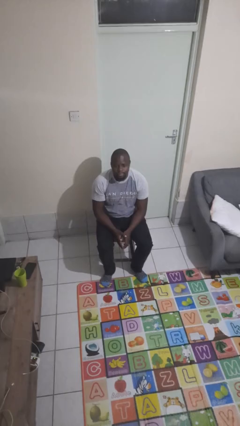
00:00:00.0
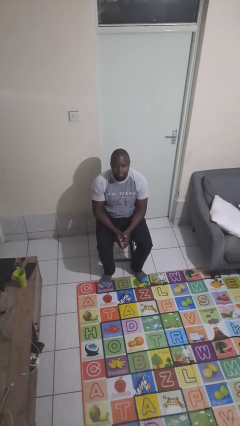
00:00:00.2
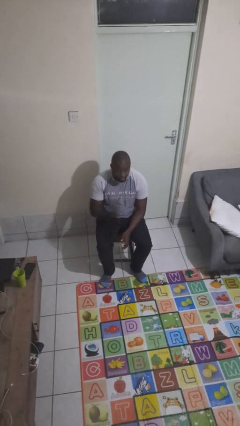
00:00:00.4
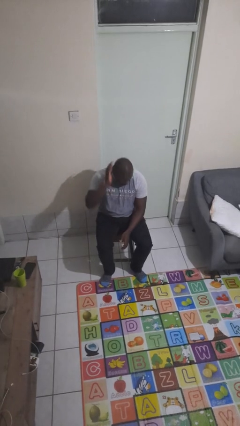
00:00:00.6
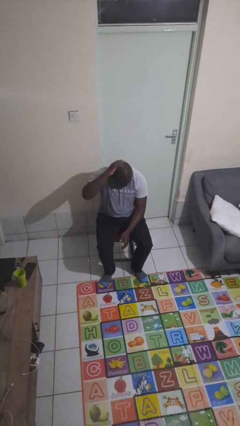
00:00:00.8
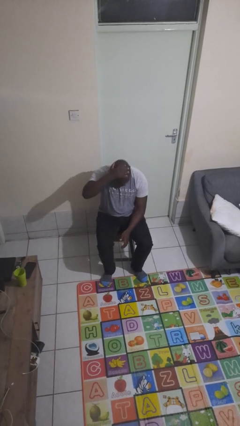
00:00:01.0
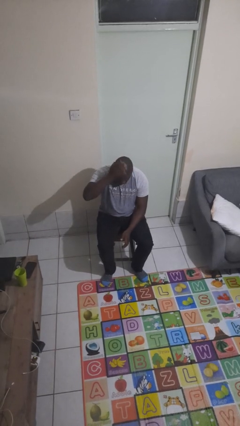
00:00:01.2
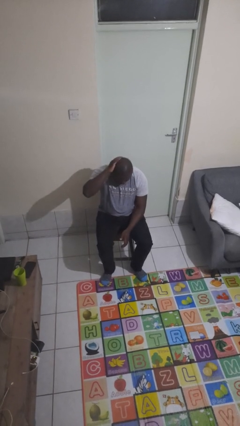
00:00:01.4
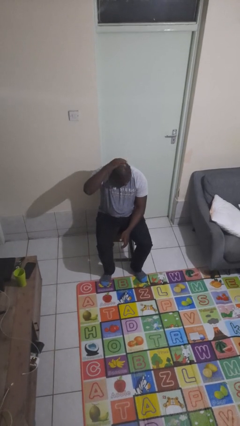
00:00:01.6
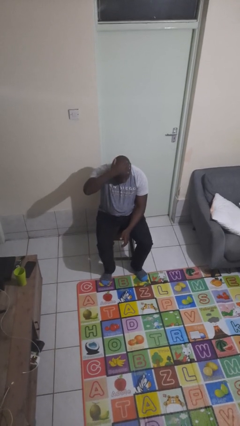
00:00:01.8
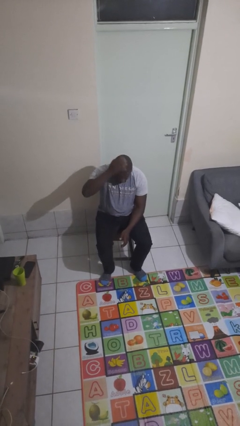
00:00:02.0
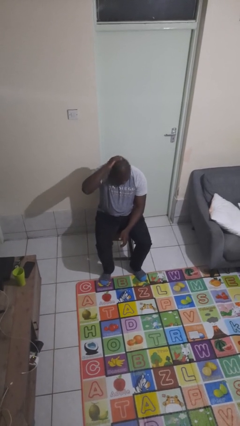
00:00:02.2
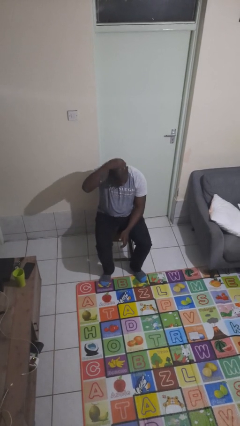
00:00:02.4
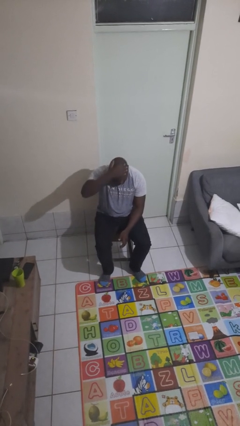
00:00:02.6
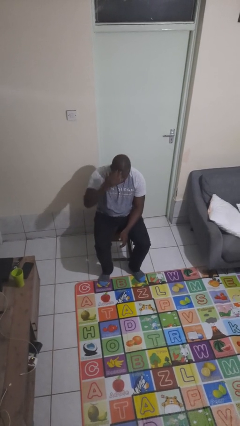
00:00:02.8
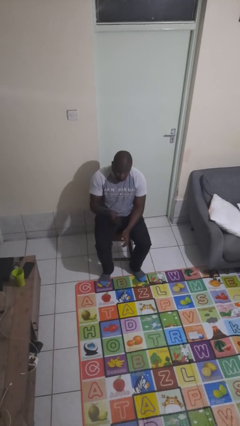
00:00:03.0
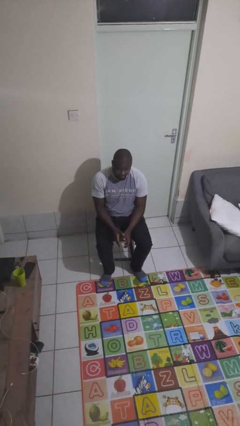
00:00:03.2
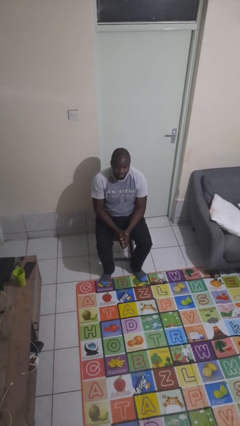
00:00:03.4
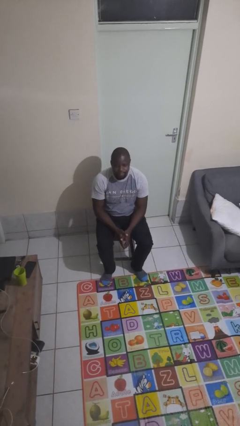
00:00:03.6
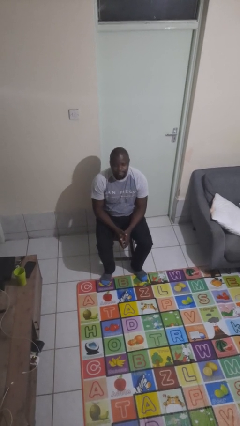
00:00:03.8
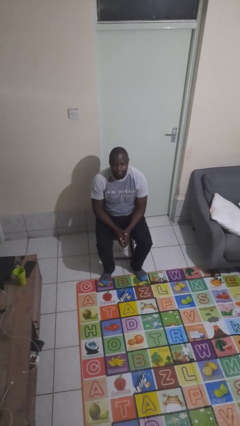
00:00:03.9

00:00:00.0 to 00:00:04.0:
person scratches face

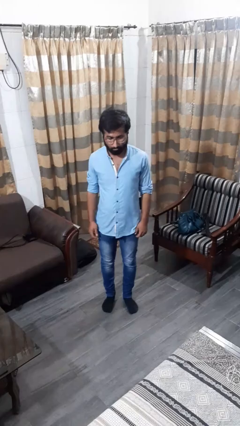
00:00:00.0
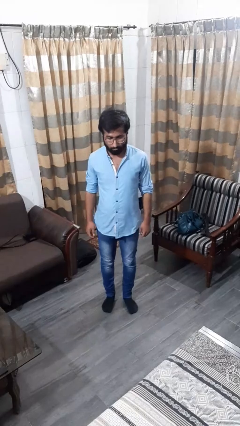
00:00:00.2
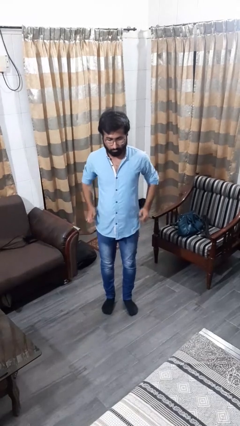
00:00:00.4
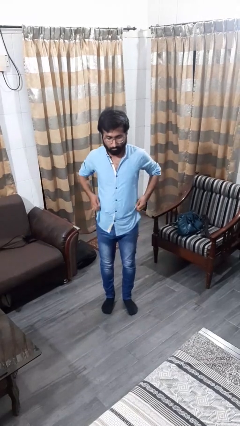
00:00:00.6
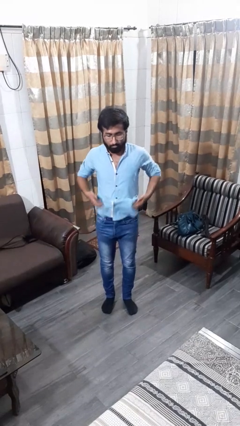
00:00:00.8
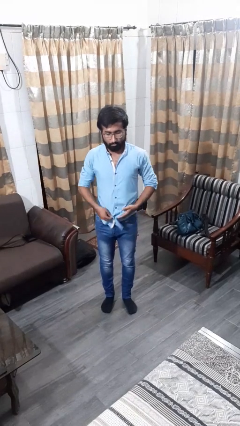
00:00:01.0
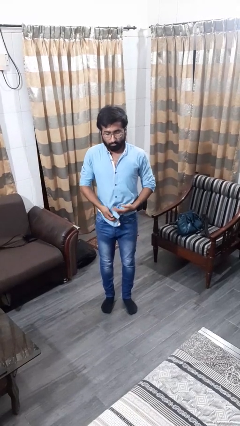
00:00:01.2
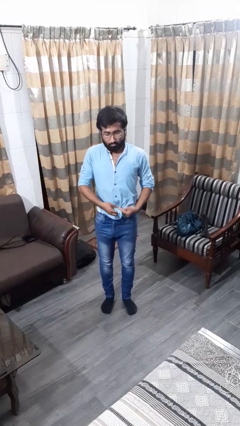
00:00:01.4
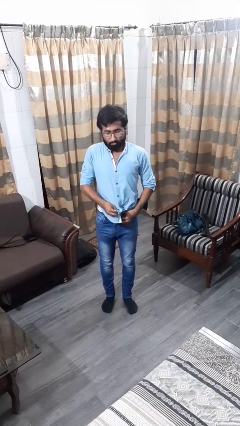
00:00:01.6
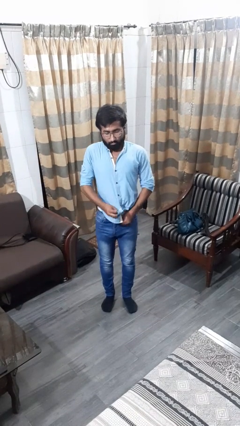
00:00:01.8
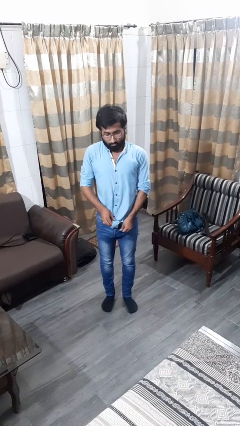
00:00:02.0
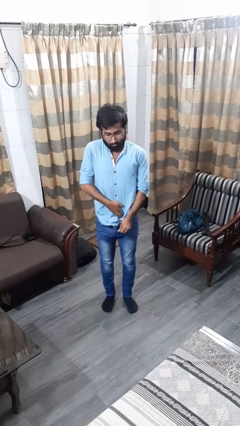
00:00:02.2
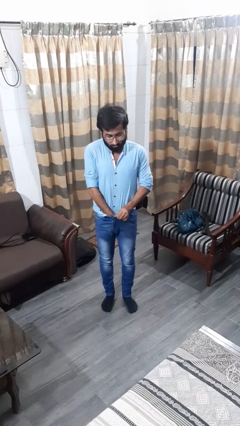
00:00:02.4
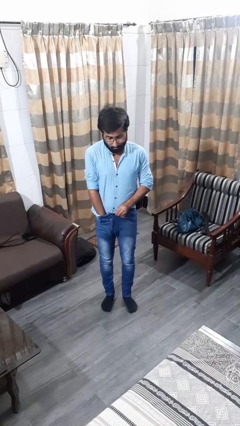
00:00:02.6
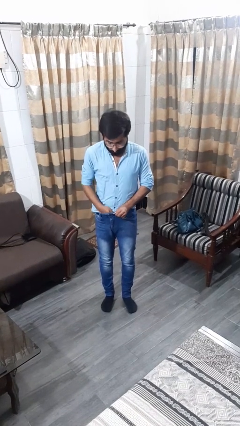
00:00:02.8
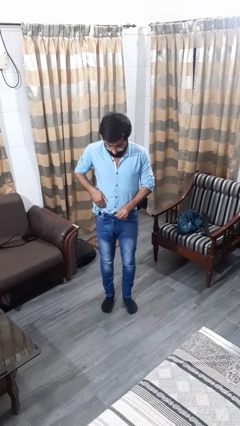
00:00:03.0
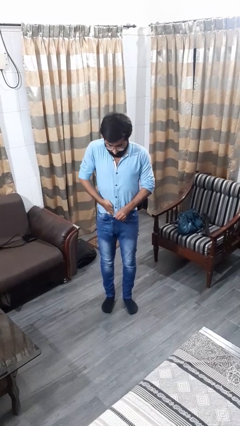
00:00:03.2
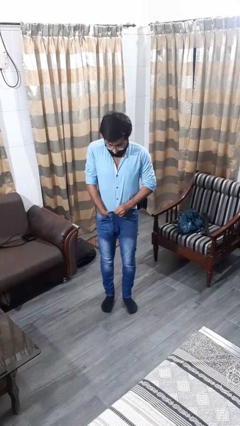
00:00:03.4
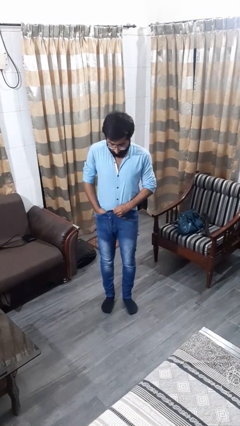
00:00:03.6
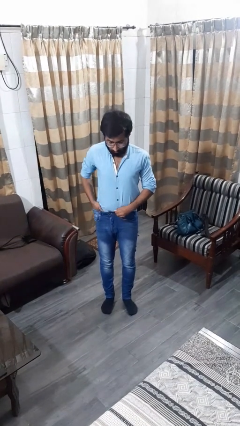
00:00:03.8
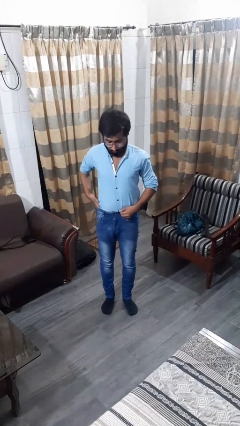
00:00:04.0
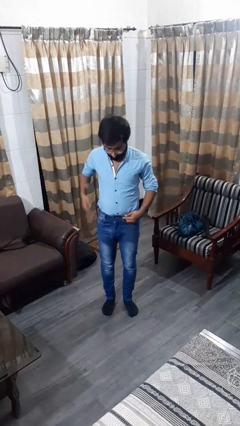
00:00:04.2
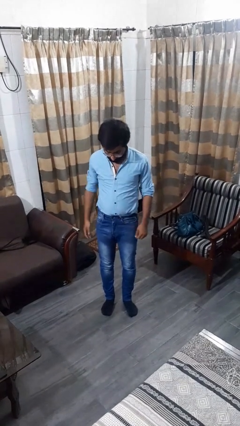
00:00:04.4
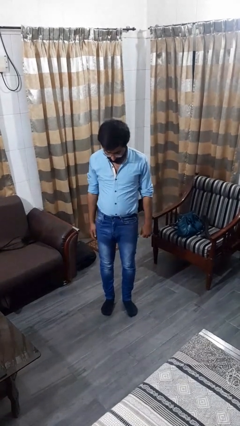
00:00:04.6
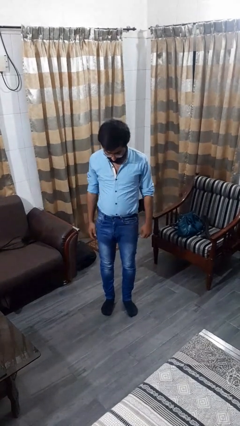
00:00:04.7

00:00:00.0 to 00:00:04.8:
person tucks in shirt

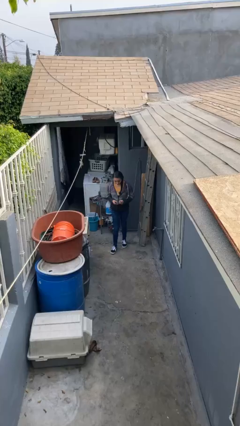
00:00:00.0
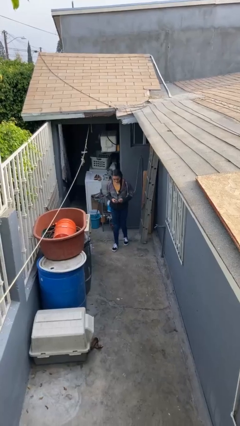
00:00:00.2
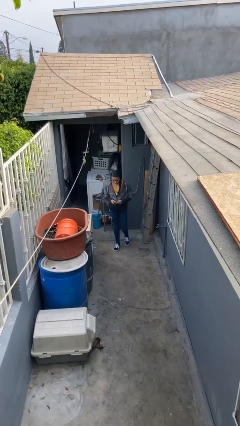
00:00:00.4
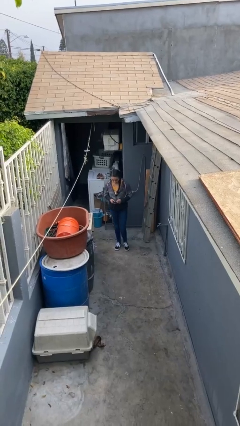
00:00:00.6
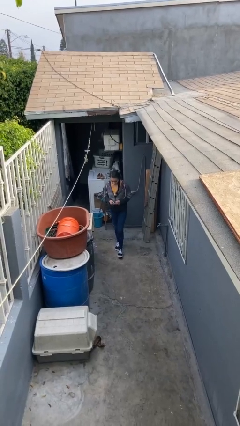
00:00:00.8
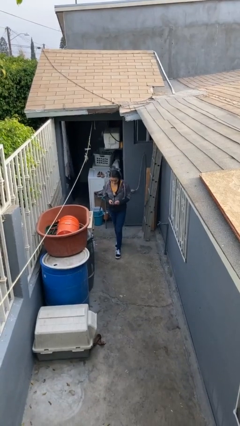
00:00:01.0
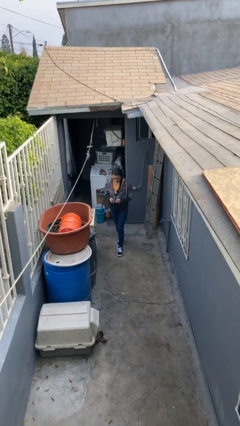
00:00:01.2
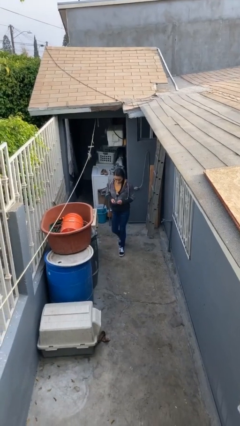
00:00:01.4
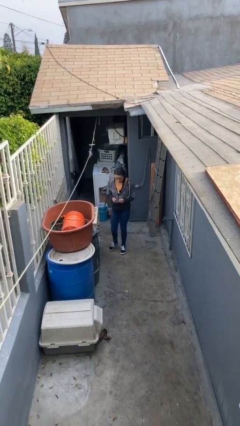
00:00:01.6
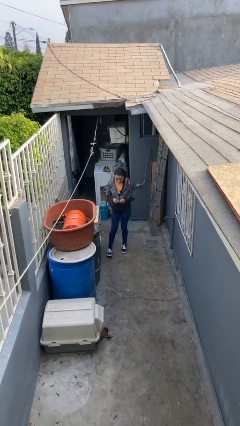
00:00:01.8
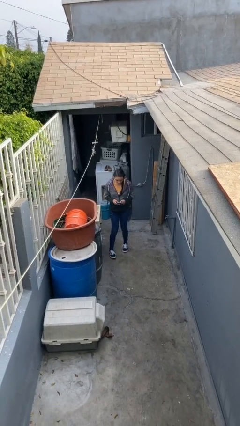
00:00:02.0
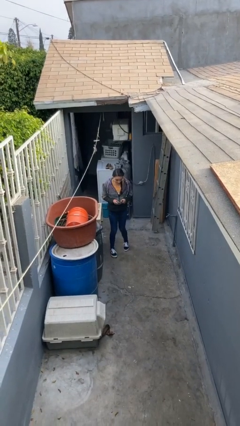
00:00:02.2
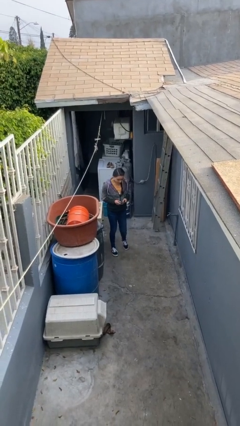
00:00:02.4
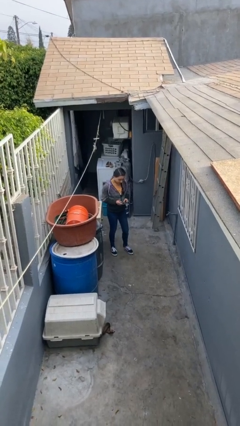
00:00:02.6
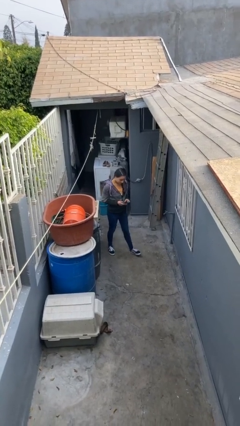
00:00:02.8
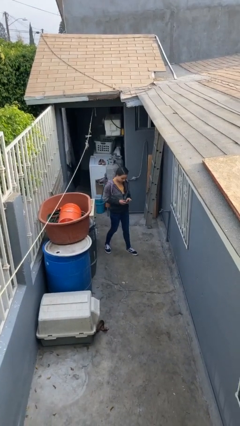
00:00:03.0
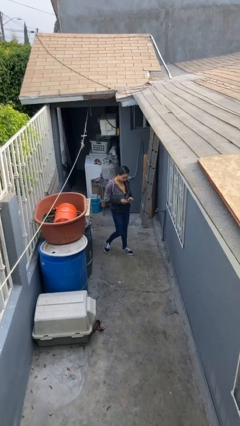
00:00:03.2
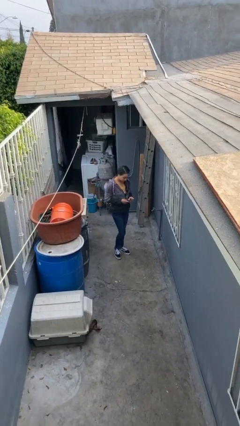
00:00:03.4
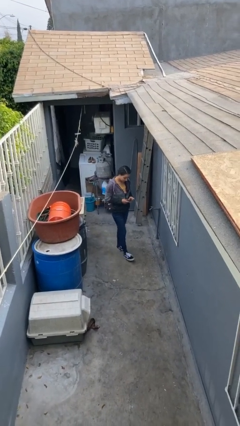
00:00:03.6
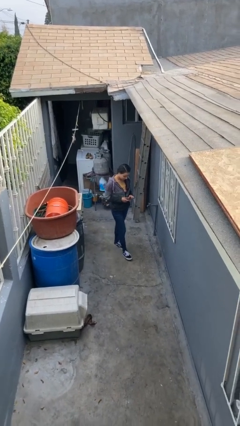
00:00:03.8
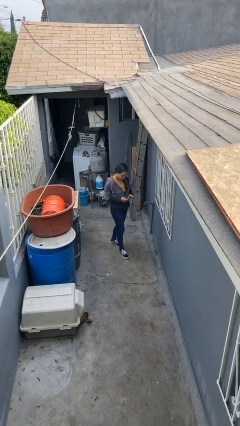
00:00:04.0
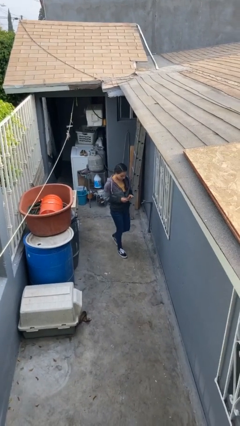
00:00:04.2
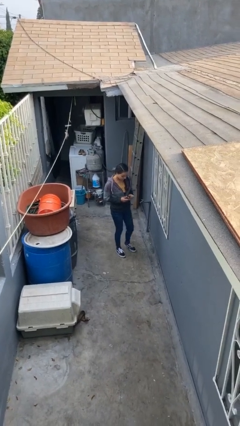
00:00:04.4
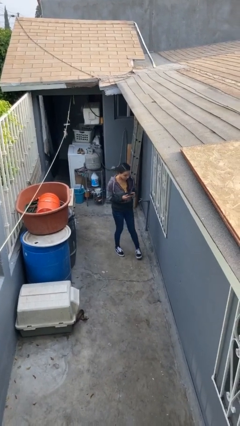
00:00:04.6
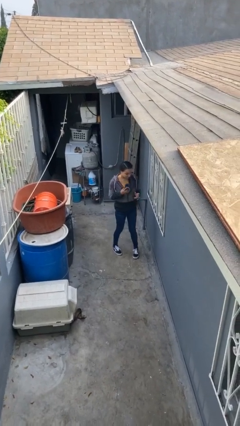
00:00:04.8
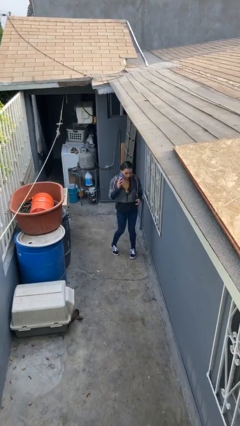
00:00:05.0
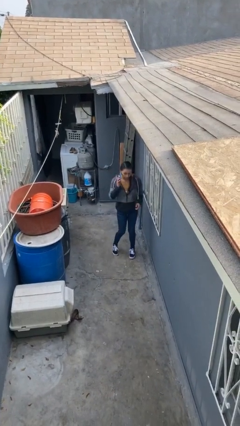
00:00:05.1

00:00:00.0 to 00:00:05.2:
person texts on phone

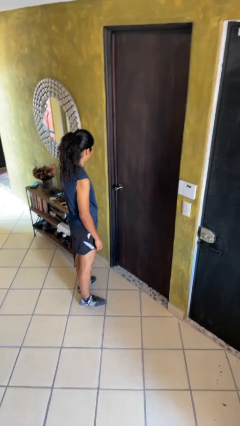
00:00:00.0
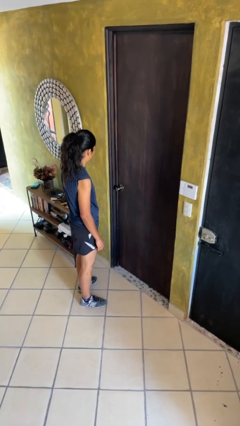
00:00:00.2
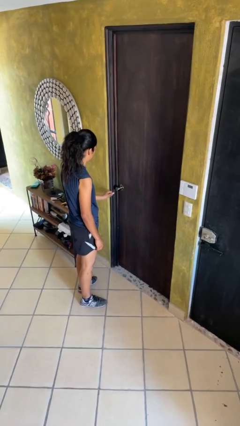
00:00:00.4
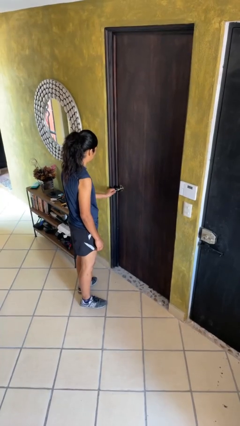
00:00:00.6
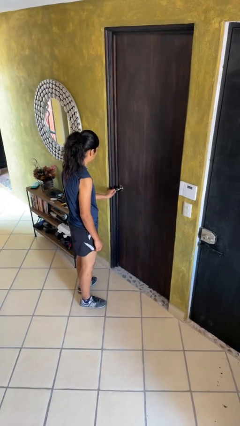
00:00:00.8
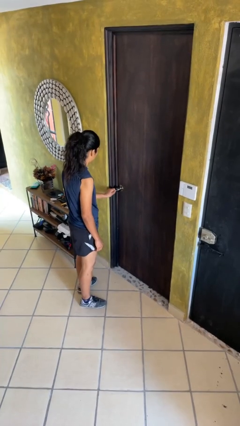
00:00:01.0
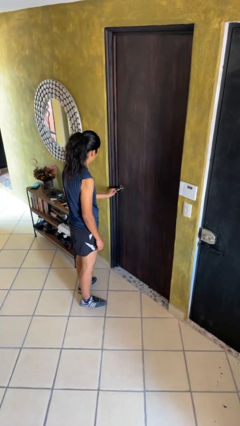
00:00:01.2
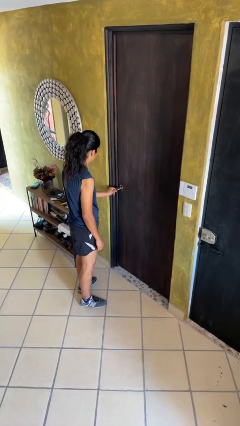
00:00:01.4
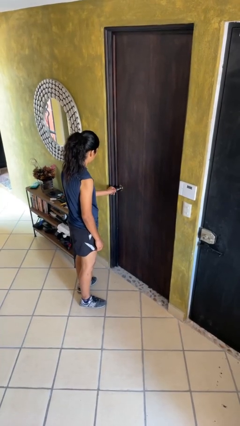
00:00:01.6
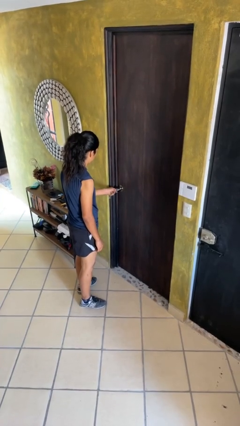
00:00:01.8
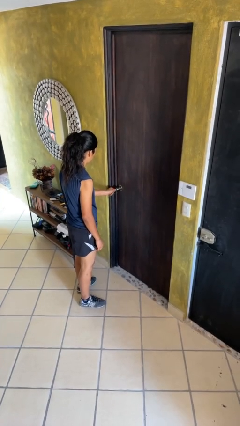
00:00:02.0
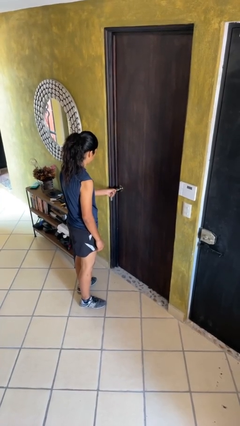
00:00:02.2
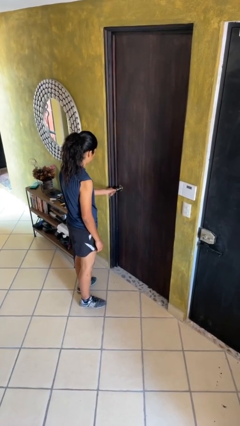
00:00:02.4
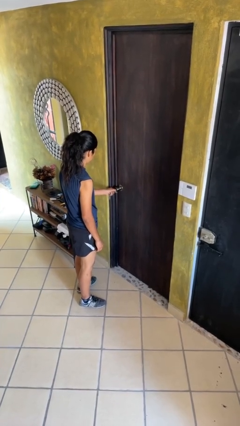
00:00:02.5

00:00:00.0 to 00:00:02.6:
person unlocks door with keys

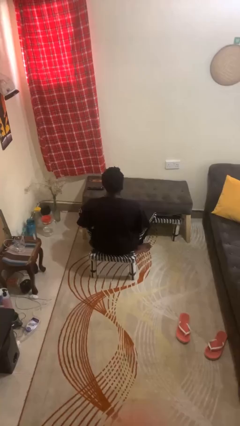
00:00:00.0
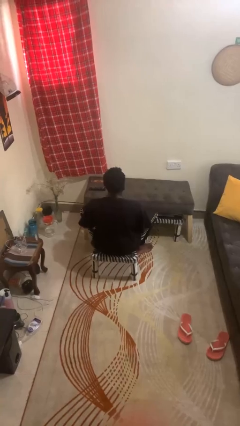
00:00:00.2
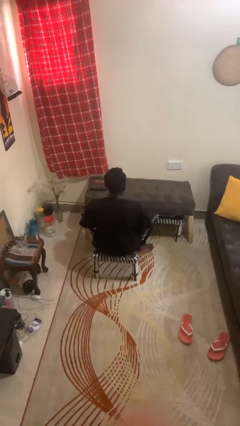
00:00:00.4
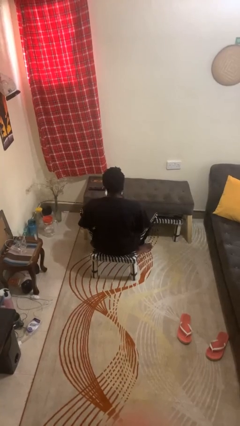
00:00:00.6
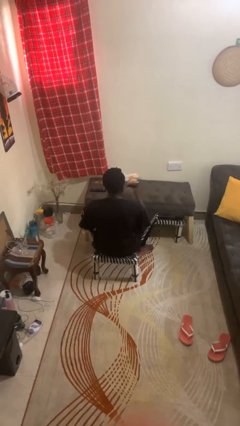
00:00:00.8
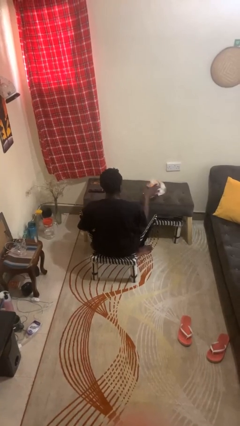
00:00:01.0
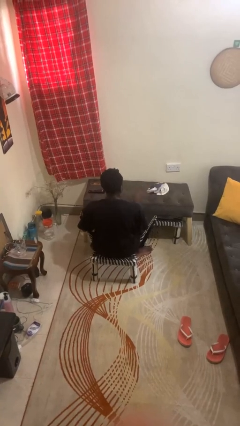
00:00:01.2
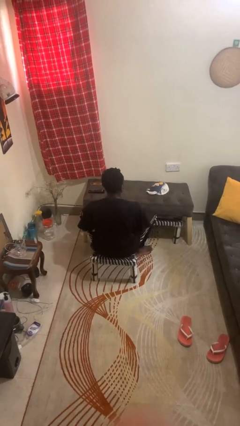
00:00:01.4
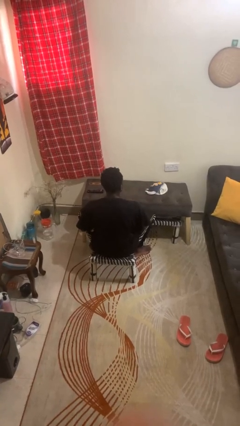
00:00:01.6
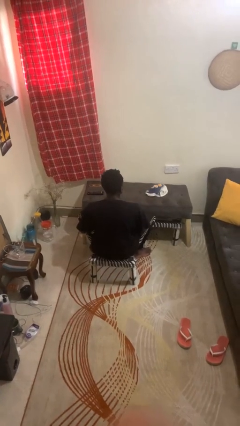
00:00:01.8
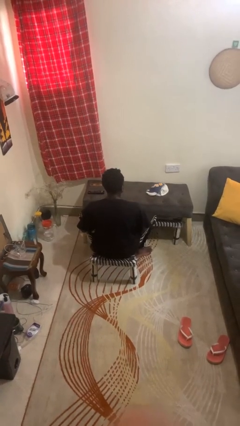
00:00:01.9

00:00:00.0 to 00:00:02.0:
person throws object on table
